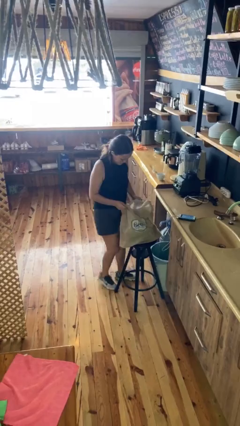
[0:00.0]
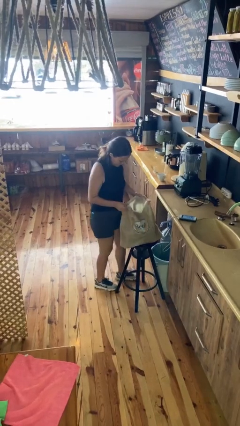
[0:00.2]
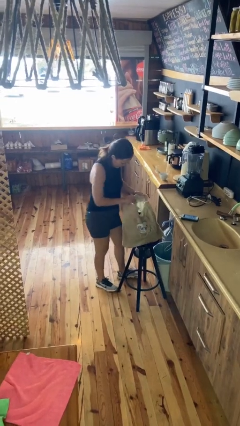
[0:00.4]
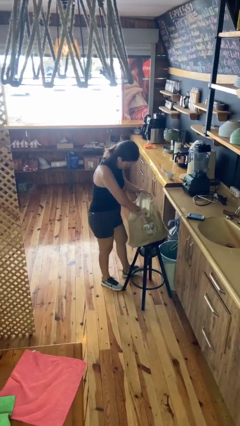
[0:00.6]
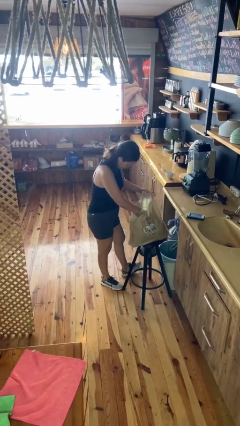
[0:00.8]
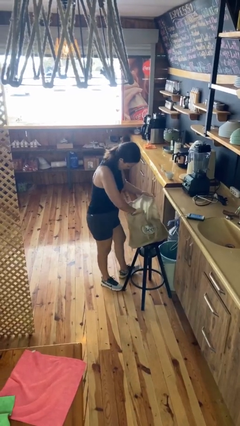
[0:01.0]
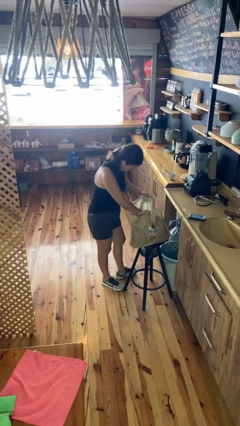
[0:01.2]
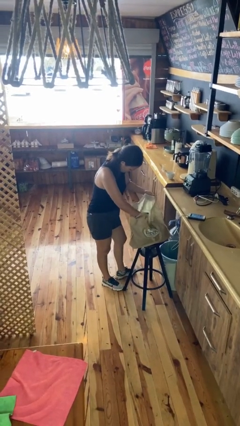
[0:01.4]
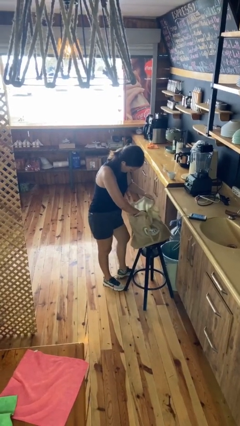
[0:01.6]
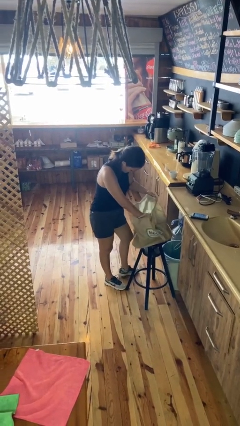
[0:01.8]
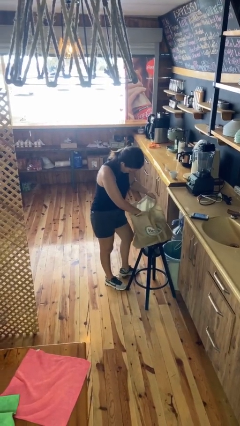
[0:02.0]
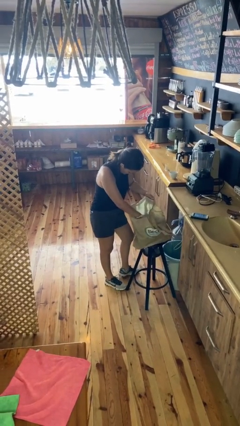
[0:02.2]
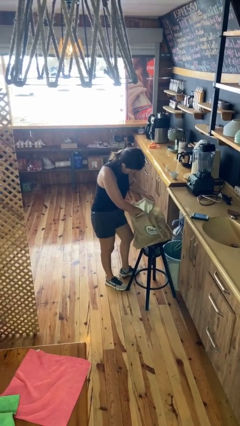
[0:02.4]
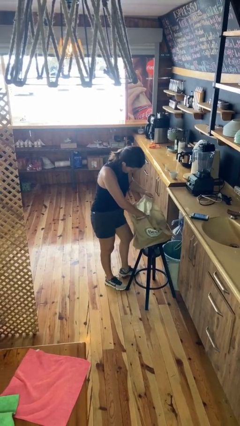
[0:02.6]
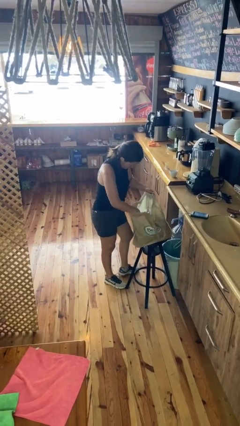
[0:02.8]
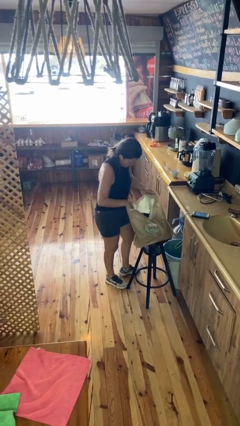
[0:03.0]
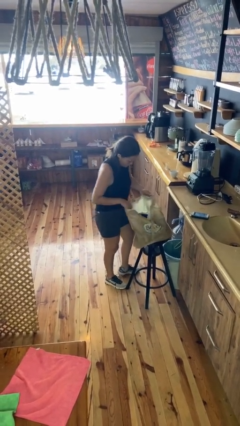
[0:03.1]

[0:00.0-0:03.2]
person searches in bag

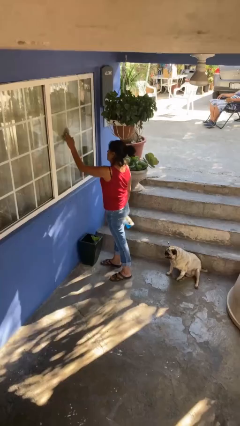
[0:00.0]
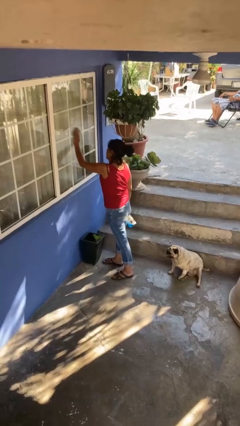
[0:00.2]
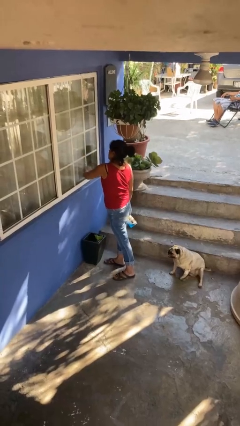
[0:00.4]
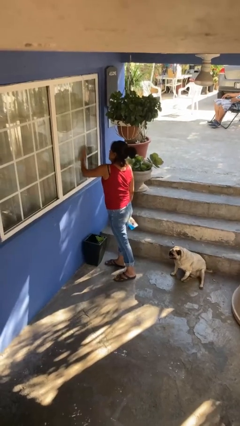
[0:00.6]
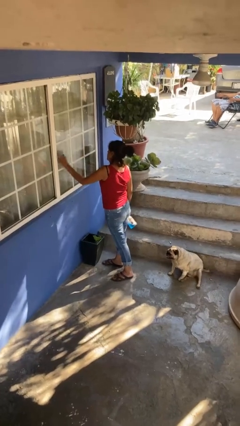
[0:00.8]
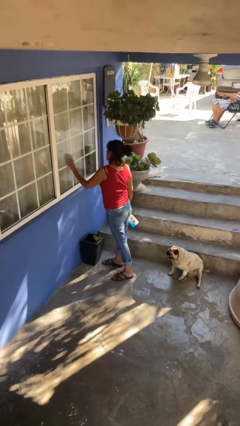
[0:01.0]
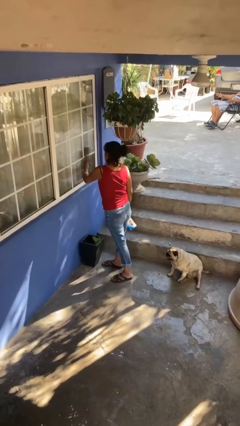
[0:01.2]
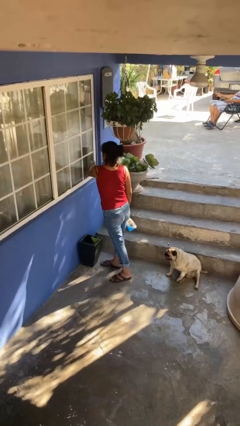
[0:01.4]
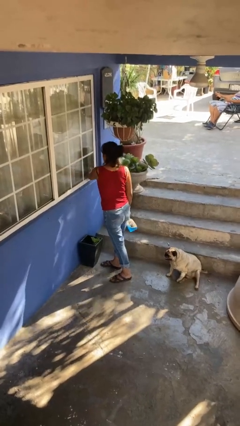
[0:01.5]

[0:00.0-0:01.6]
person washes window

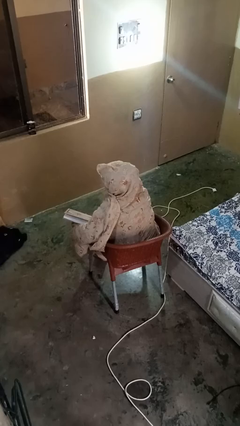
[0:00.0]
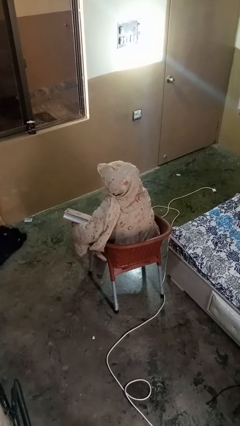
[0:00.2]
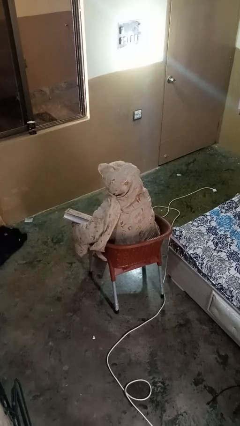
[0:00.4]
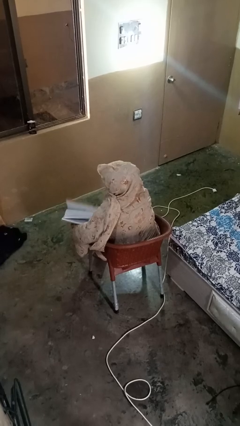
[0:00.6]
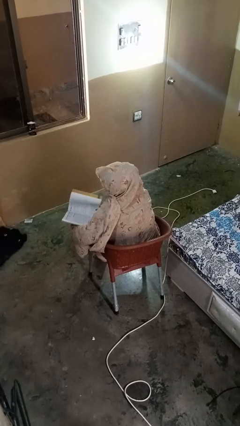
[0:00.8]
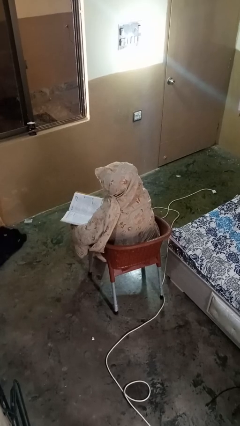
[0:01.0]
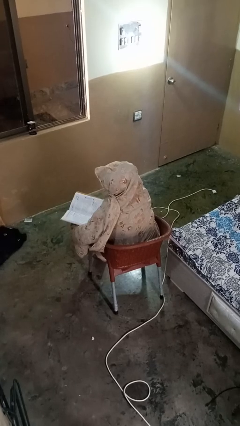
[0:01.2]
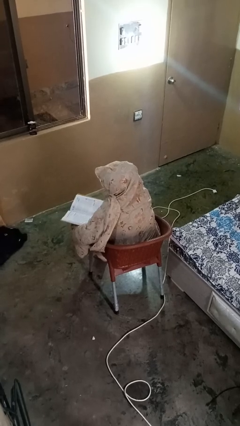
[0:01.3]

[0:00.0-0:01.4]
person reads book

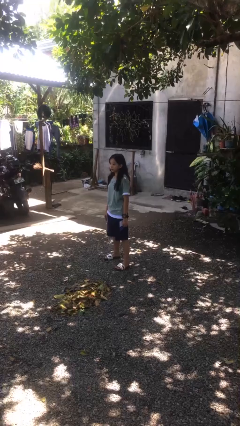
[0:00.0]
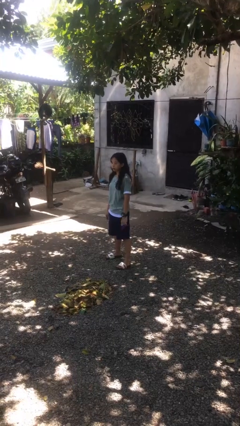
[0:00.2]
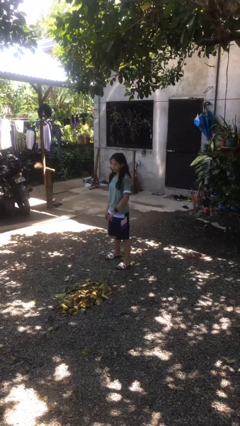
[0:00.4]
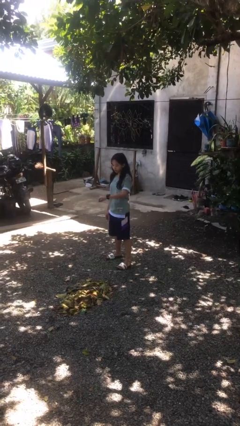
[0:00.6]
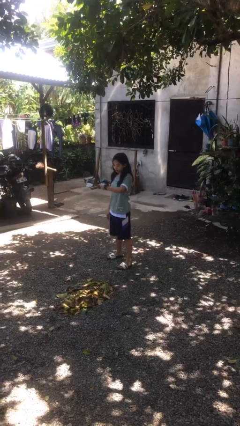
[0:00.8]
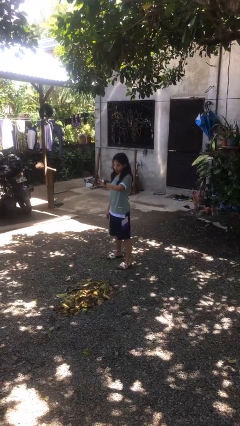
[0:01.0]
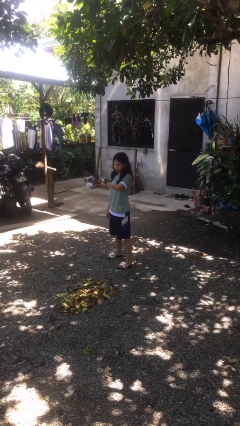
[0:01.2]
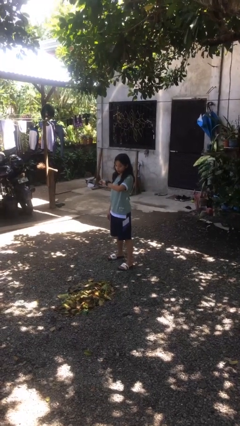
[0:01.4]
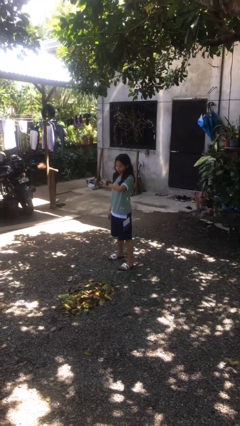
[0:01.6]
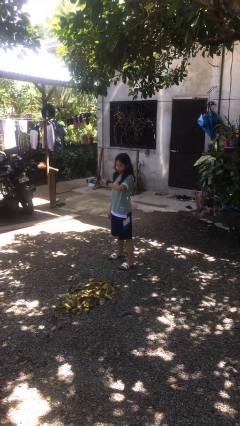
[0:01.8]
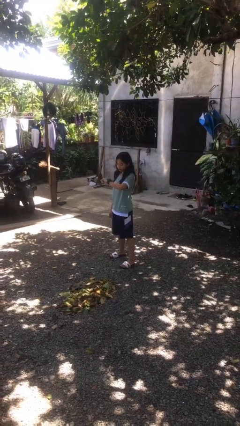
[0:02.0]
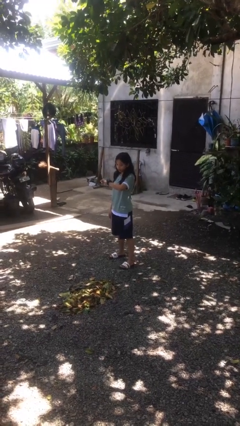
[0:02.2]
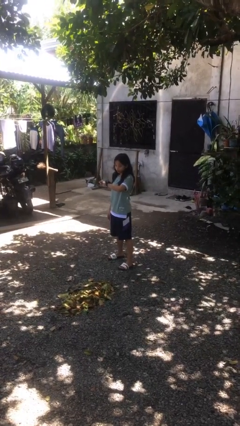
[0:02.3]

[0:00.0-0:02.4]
person looks at wristwatch

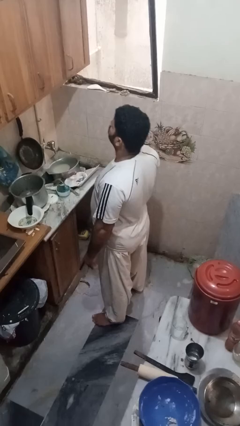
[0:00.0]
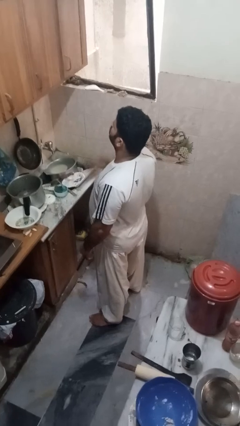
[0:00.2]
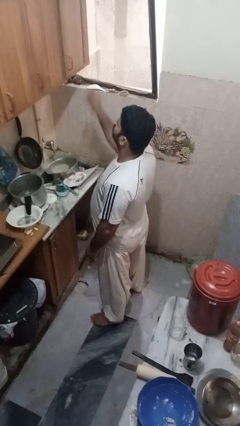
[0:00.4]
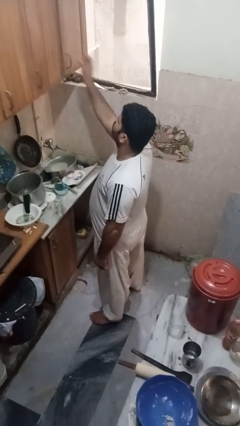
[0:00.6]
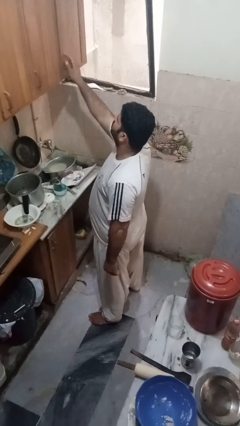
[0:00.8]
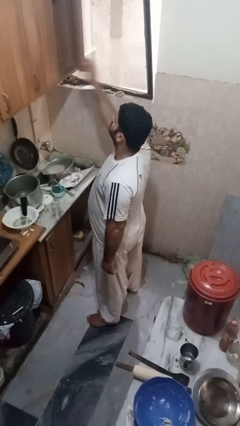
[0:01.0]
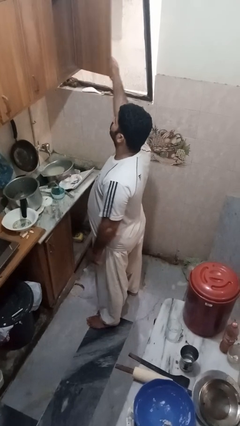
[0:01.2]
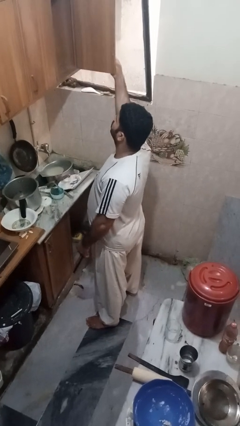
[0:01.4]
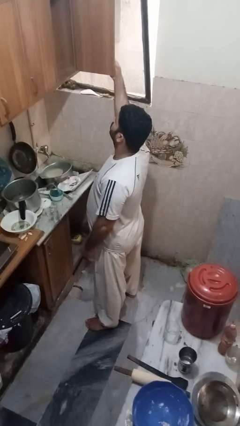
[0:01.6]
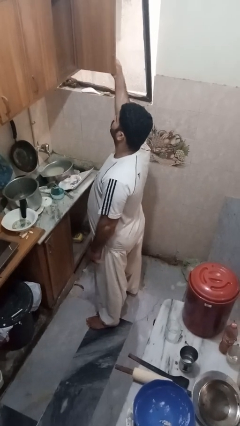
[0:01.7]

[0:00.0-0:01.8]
person opens cabinet

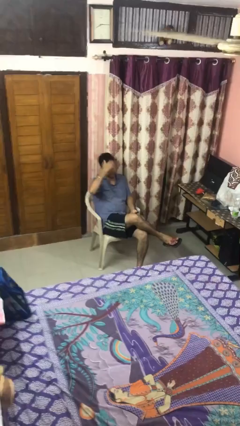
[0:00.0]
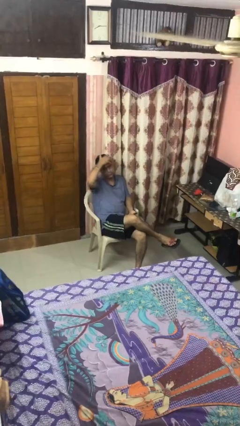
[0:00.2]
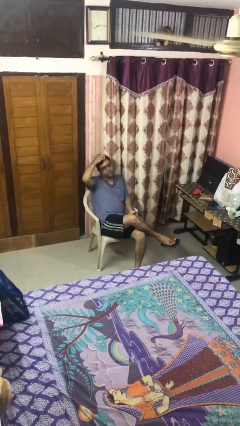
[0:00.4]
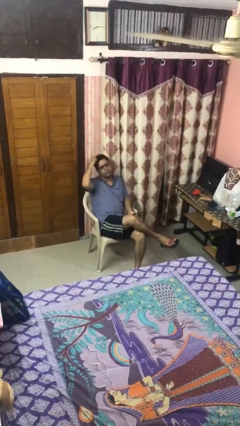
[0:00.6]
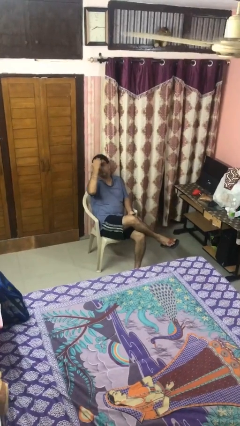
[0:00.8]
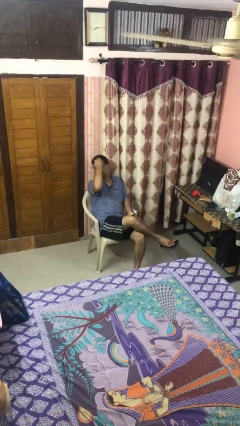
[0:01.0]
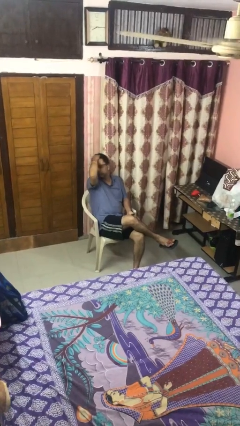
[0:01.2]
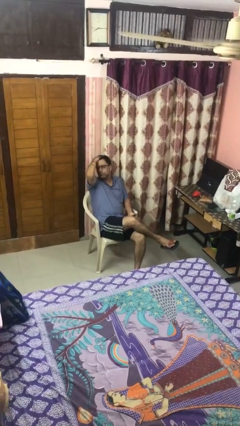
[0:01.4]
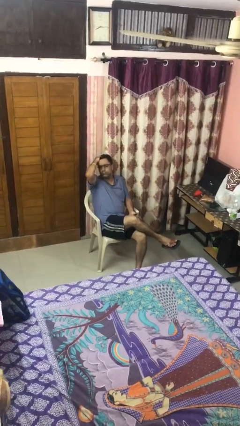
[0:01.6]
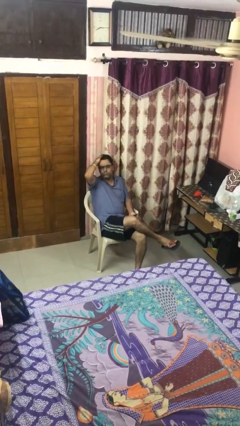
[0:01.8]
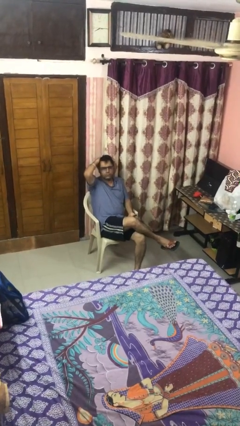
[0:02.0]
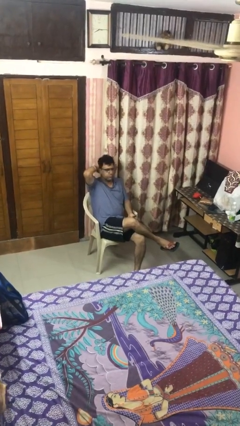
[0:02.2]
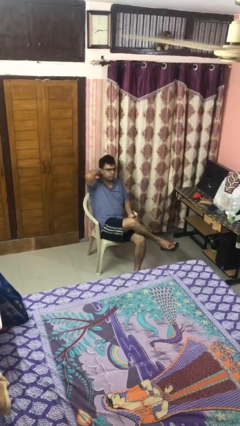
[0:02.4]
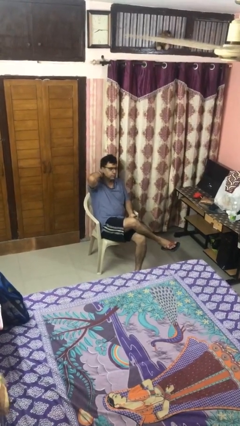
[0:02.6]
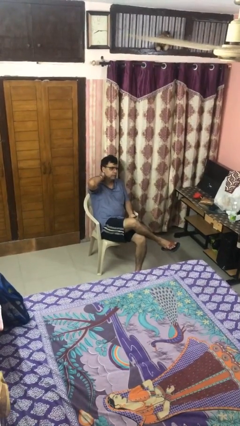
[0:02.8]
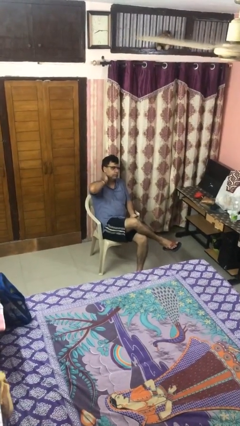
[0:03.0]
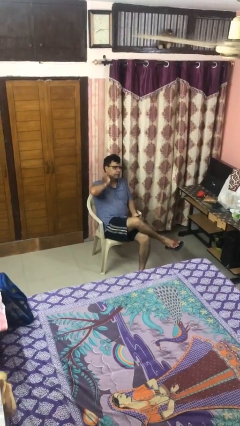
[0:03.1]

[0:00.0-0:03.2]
person strokes hair

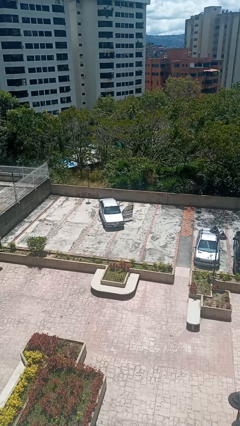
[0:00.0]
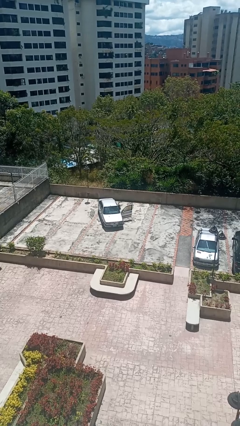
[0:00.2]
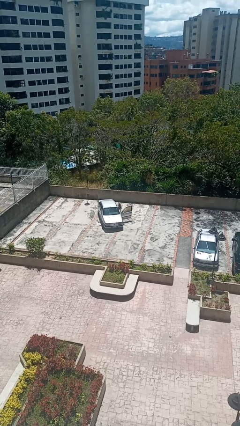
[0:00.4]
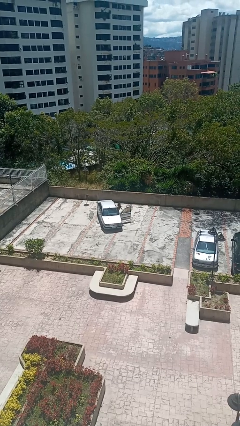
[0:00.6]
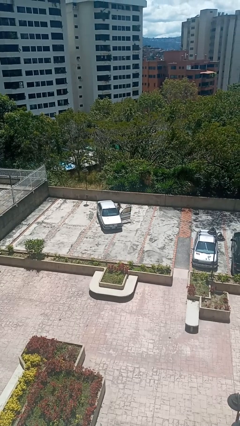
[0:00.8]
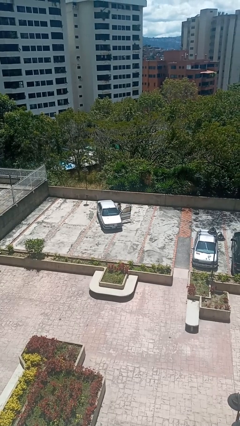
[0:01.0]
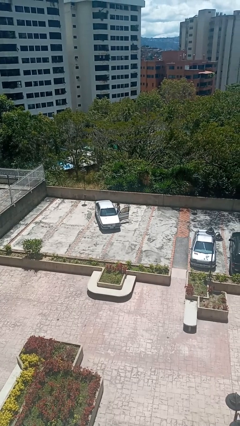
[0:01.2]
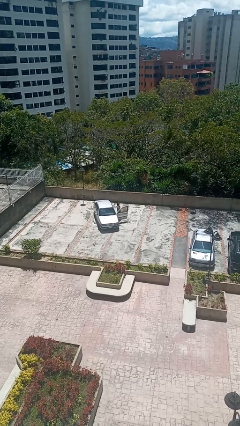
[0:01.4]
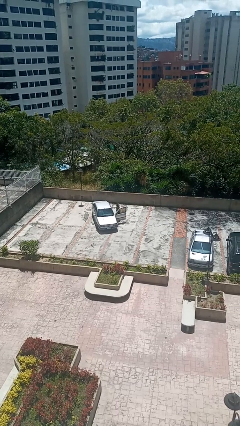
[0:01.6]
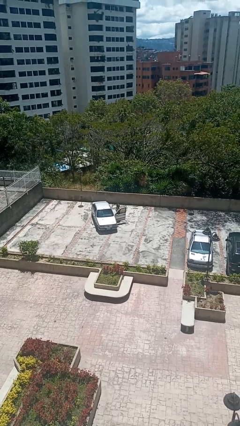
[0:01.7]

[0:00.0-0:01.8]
person exits car

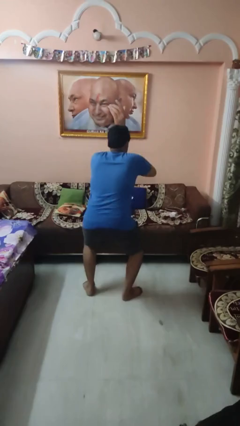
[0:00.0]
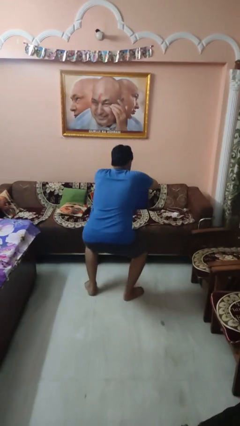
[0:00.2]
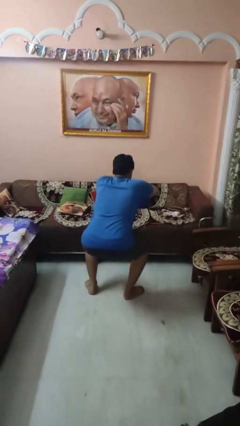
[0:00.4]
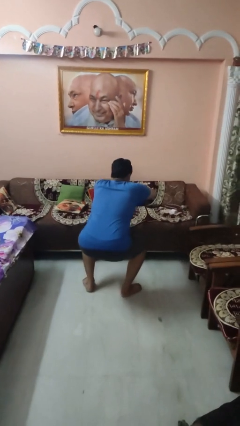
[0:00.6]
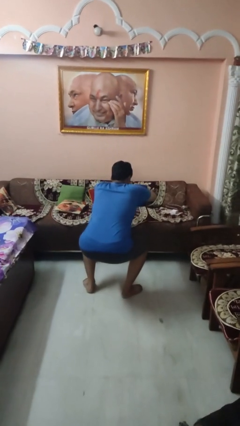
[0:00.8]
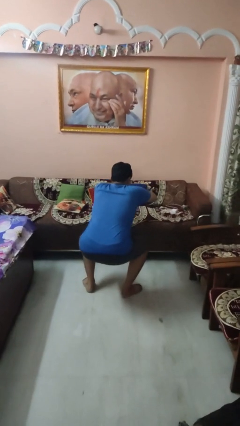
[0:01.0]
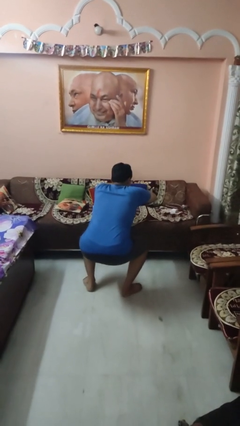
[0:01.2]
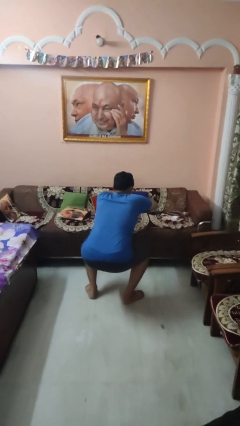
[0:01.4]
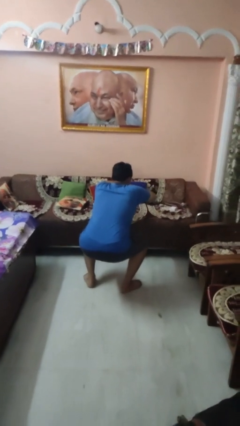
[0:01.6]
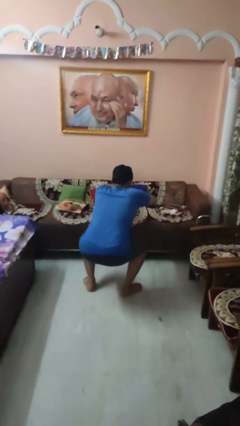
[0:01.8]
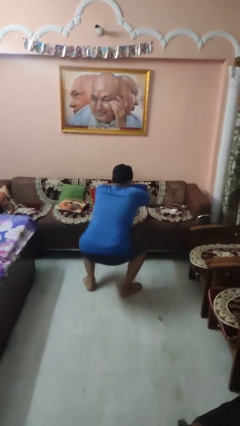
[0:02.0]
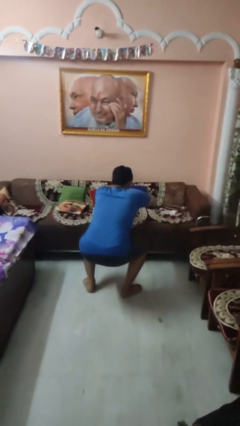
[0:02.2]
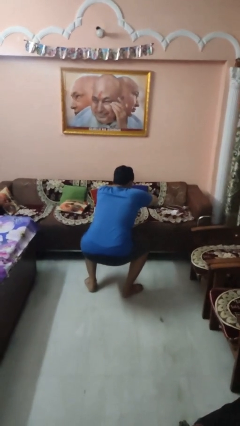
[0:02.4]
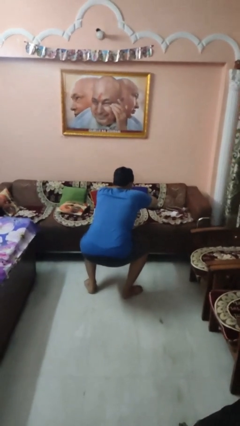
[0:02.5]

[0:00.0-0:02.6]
person squats
